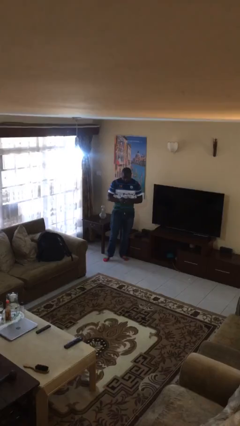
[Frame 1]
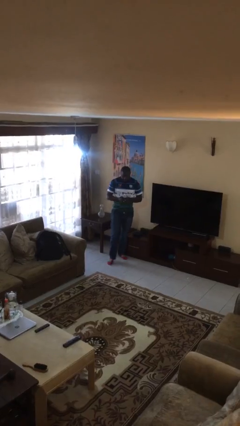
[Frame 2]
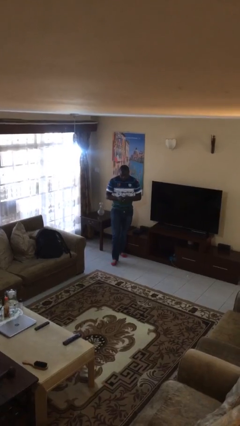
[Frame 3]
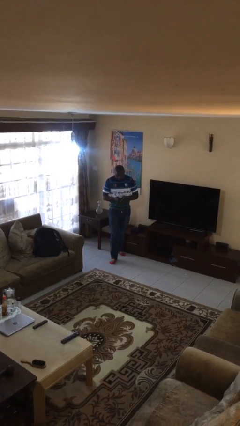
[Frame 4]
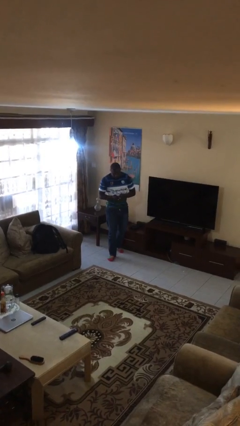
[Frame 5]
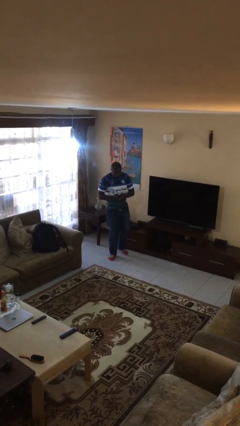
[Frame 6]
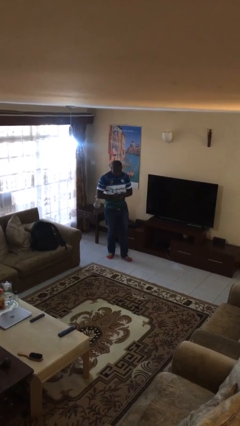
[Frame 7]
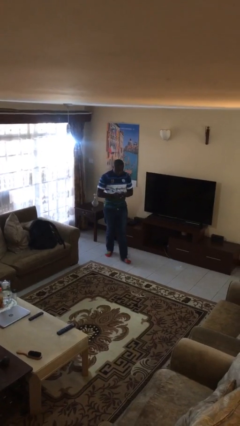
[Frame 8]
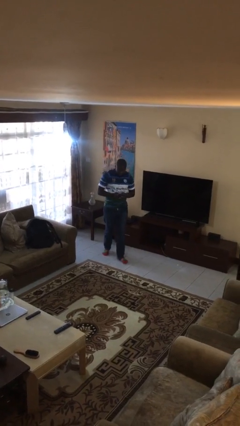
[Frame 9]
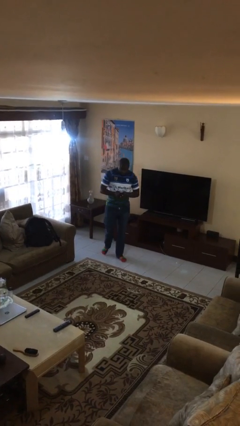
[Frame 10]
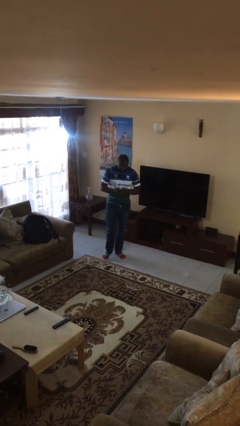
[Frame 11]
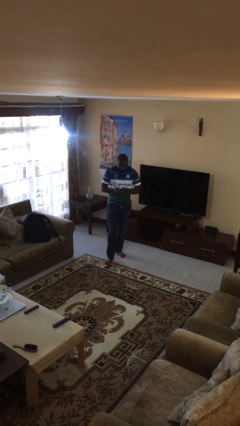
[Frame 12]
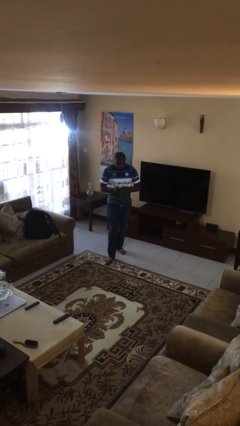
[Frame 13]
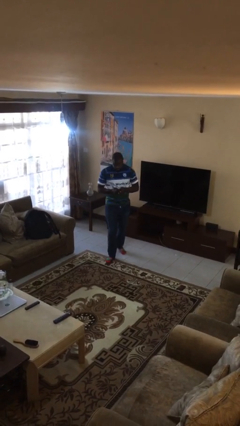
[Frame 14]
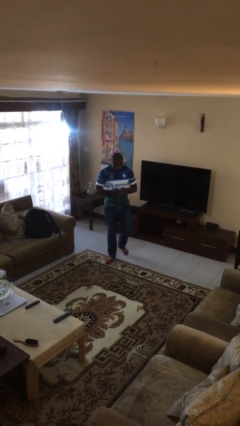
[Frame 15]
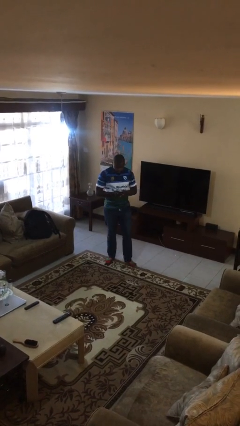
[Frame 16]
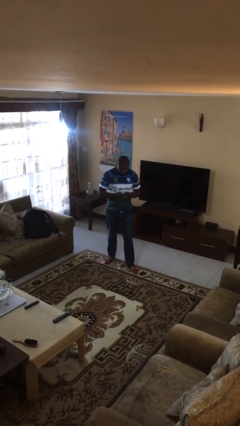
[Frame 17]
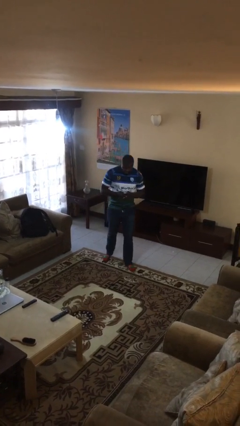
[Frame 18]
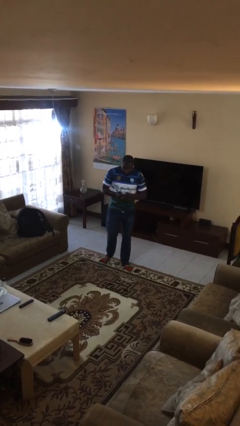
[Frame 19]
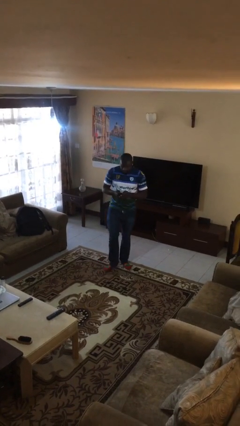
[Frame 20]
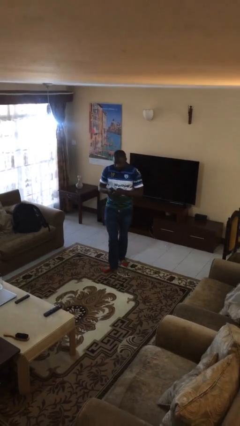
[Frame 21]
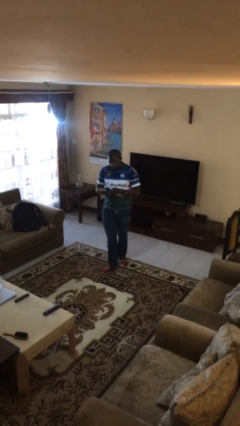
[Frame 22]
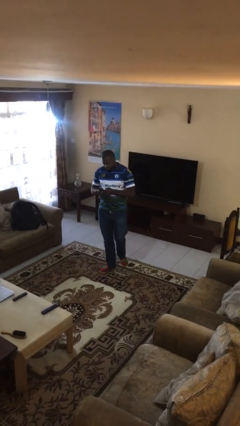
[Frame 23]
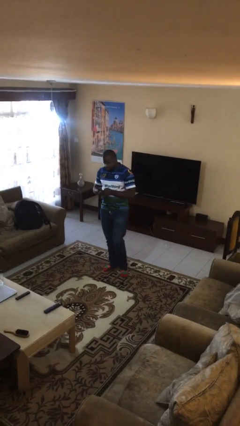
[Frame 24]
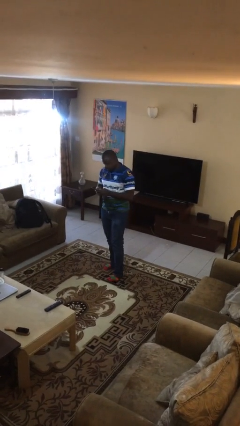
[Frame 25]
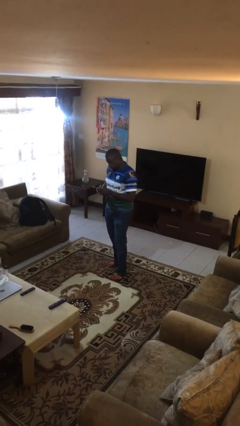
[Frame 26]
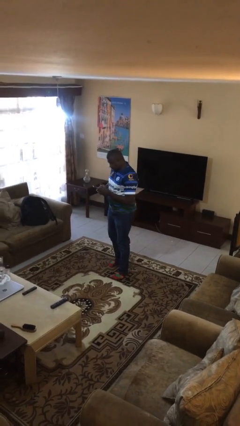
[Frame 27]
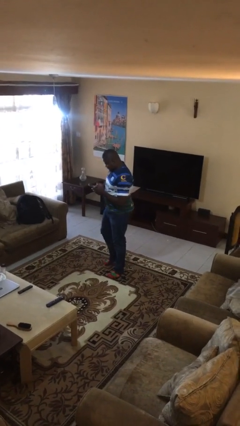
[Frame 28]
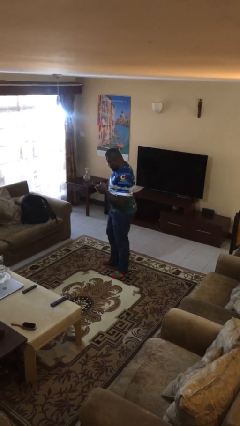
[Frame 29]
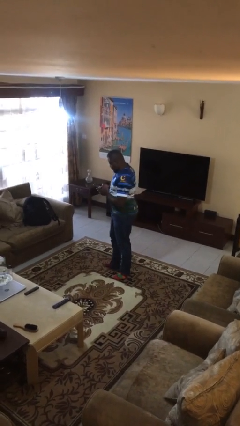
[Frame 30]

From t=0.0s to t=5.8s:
person texts on phone

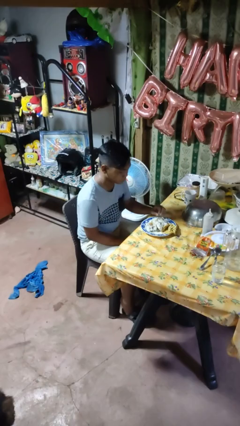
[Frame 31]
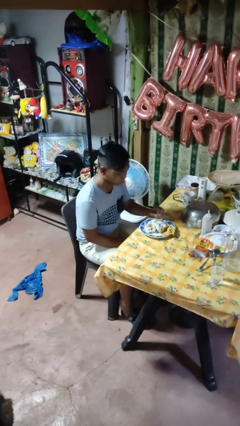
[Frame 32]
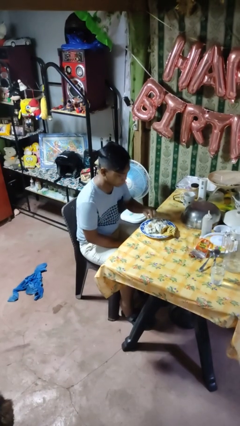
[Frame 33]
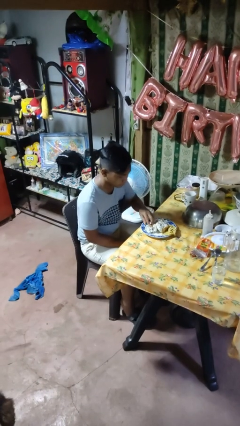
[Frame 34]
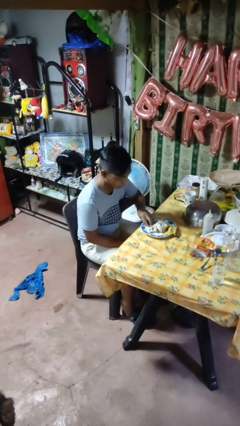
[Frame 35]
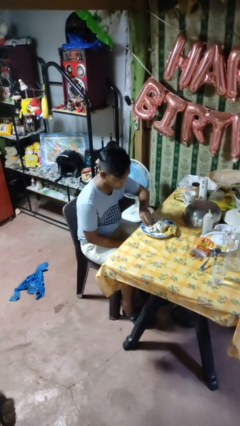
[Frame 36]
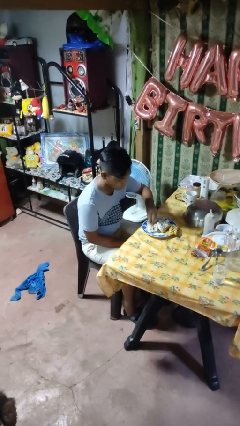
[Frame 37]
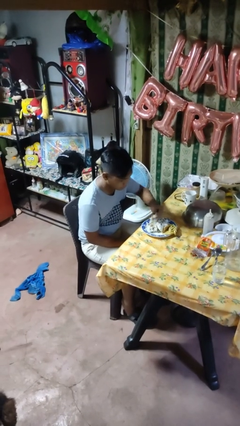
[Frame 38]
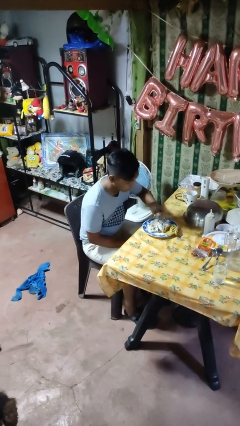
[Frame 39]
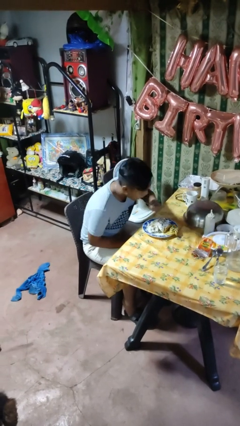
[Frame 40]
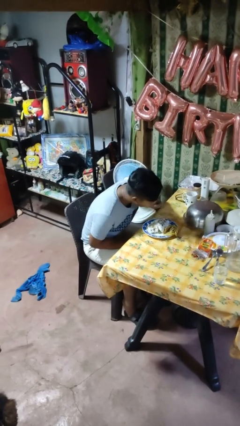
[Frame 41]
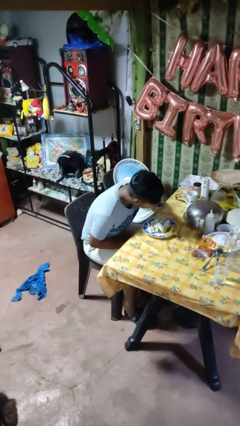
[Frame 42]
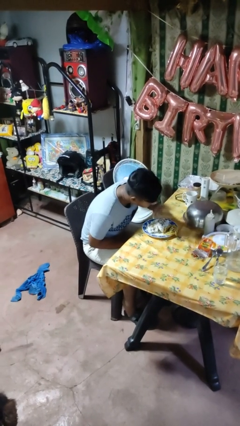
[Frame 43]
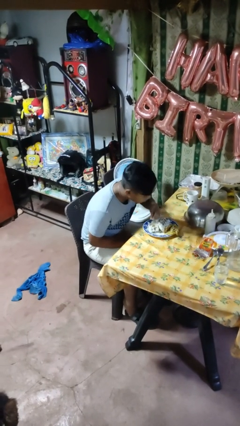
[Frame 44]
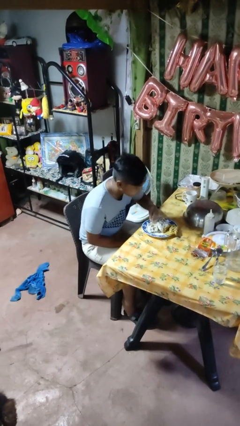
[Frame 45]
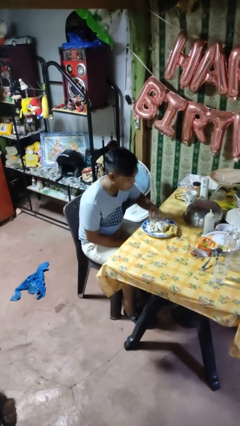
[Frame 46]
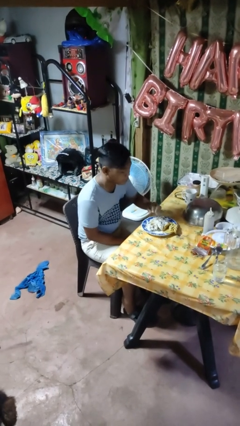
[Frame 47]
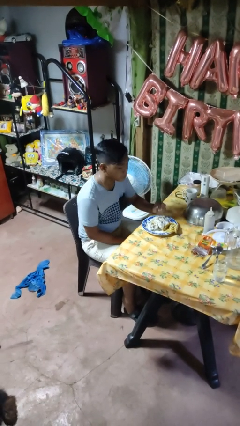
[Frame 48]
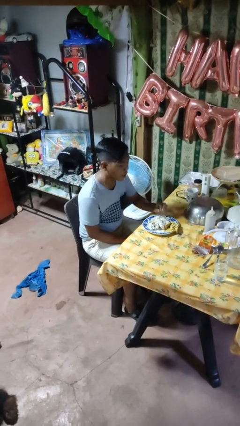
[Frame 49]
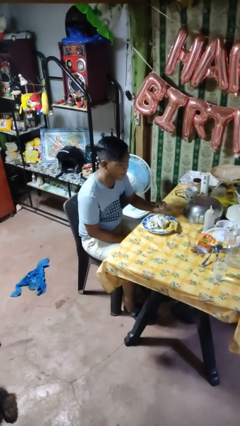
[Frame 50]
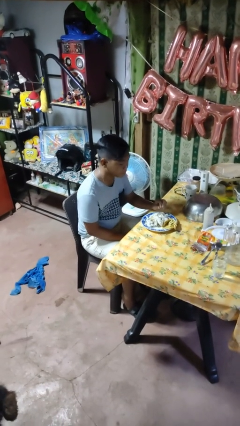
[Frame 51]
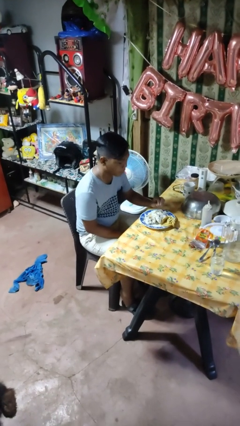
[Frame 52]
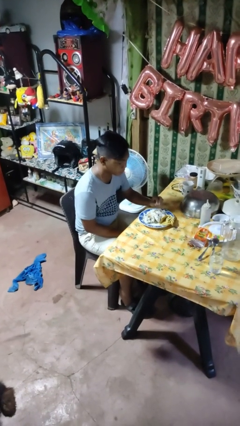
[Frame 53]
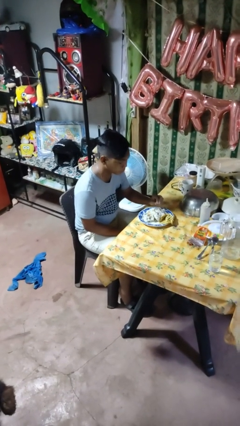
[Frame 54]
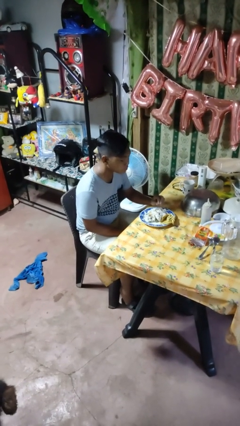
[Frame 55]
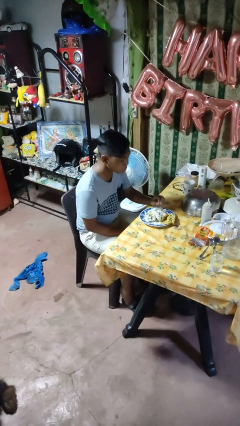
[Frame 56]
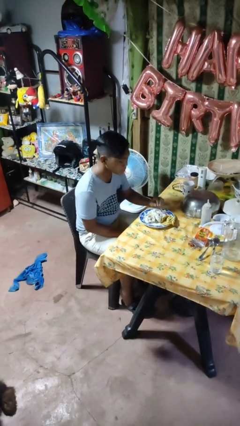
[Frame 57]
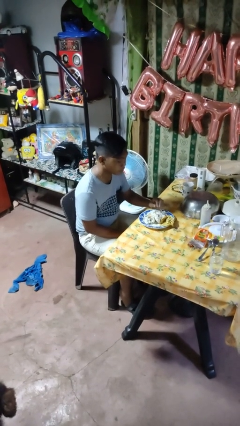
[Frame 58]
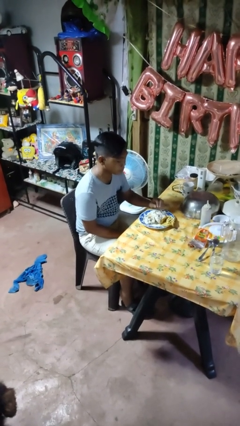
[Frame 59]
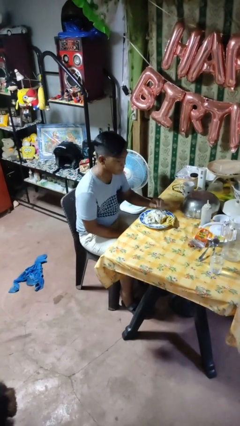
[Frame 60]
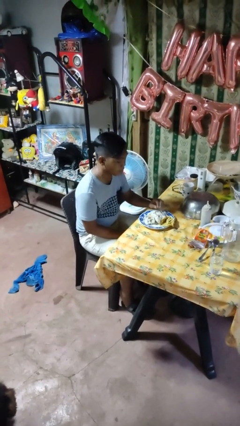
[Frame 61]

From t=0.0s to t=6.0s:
person eats with hands

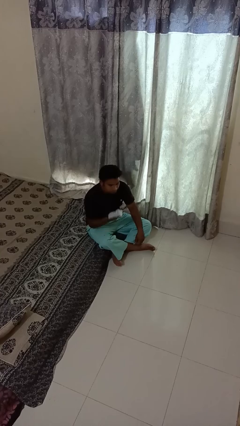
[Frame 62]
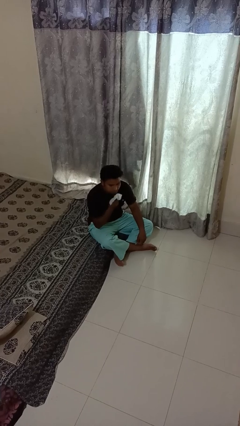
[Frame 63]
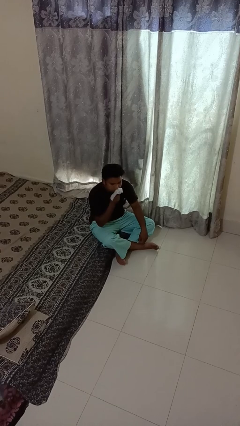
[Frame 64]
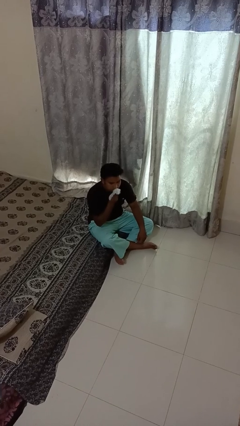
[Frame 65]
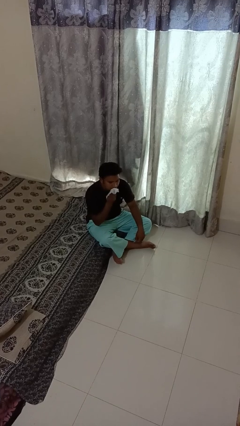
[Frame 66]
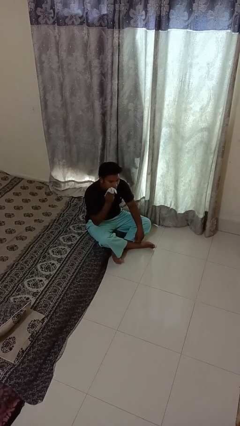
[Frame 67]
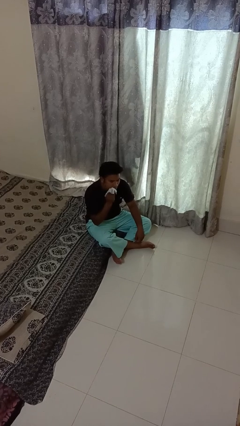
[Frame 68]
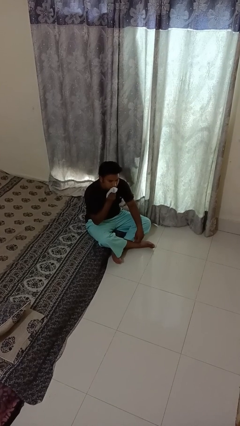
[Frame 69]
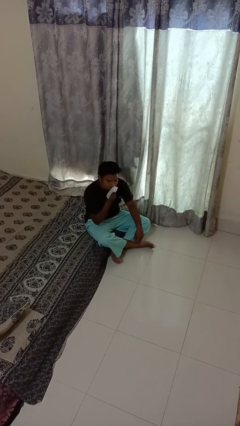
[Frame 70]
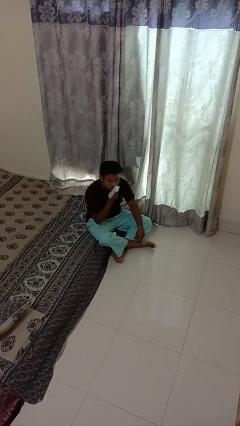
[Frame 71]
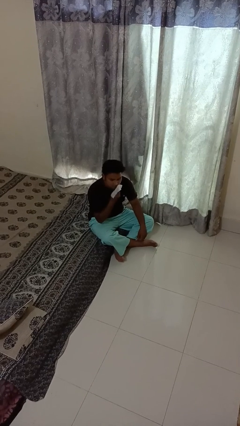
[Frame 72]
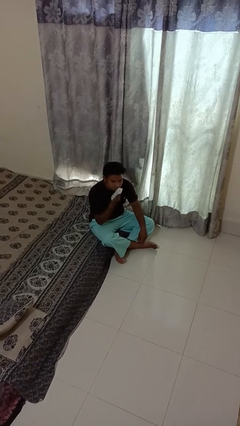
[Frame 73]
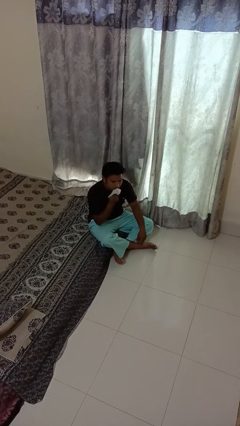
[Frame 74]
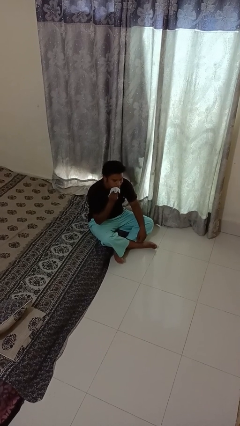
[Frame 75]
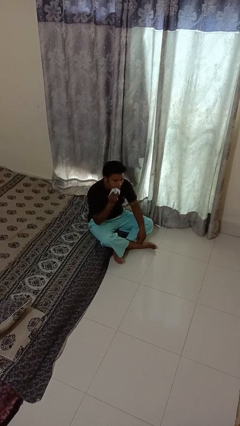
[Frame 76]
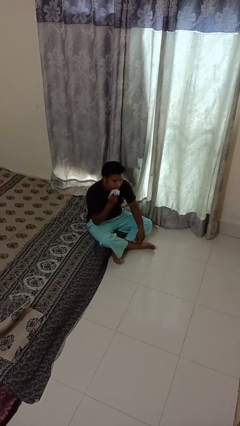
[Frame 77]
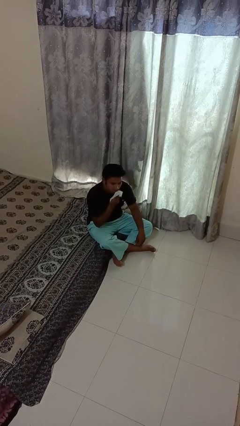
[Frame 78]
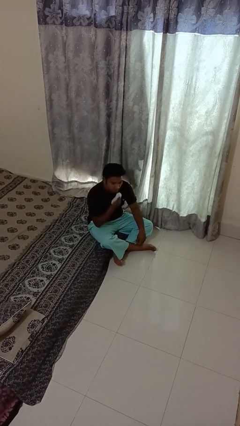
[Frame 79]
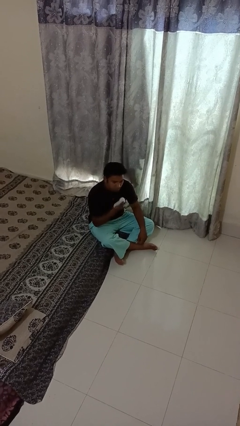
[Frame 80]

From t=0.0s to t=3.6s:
person wipes mouth with napkin

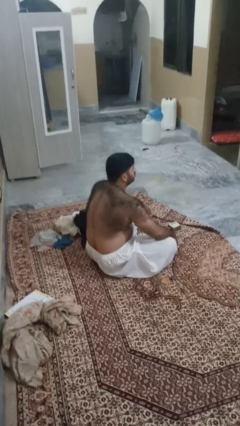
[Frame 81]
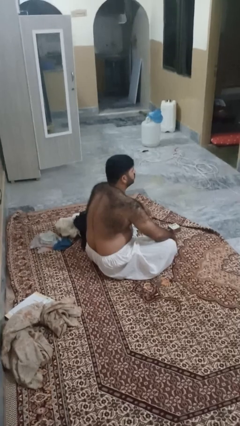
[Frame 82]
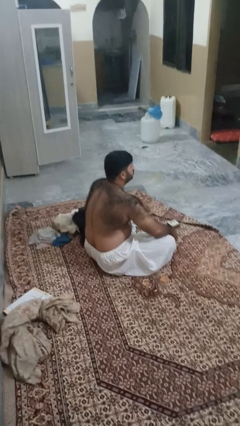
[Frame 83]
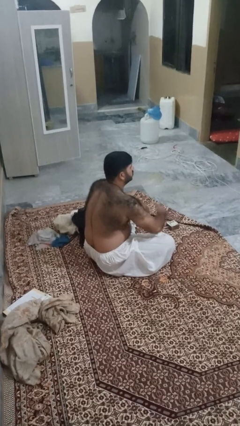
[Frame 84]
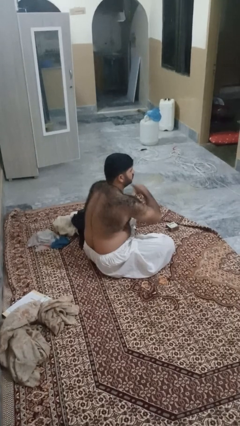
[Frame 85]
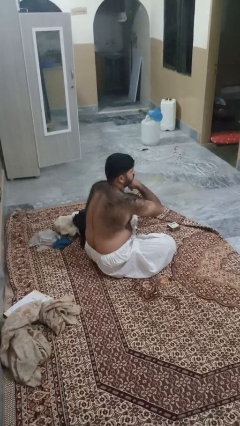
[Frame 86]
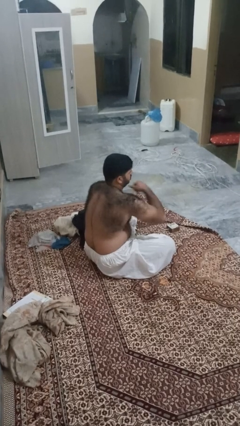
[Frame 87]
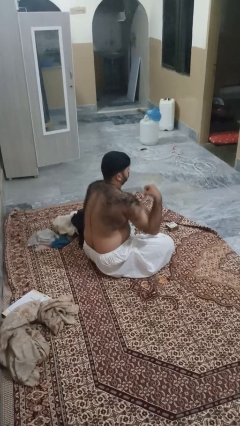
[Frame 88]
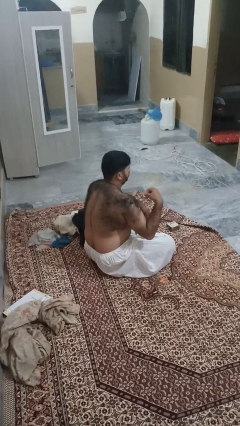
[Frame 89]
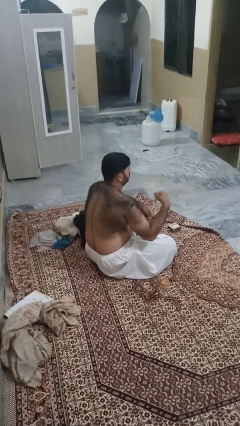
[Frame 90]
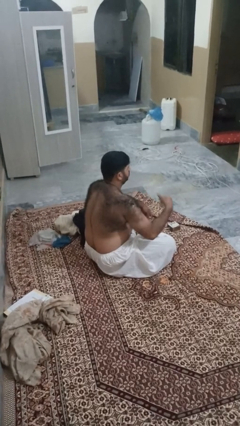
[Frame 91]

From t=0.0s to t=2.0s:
person gestures cut

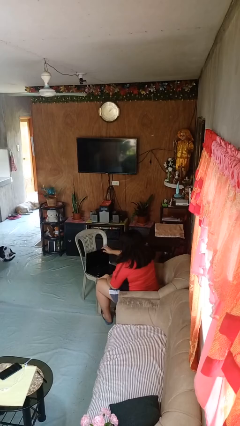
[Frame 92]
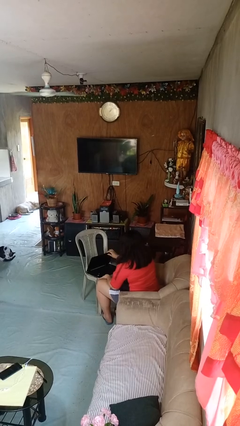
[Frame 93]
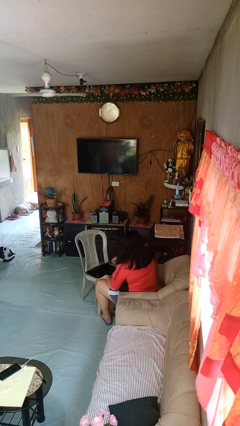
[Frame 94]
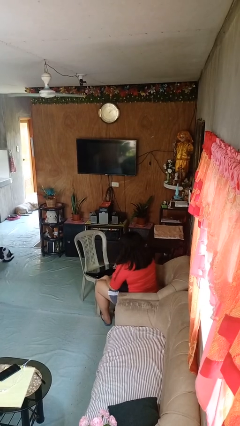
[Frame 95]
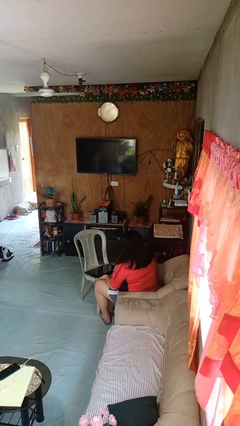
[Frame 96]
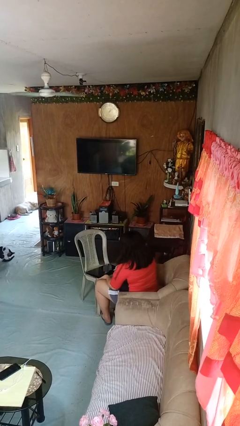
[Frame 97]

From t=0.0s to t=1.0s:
person closes laptop
